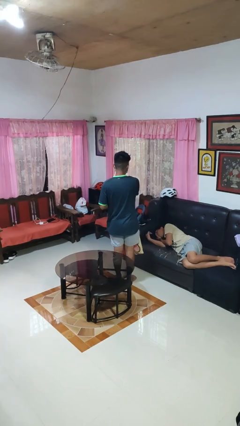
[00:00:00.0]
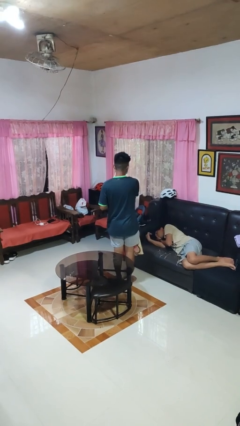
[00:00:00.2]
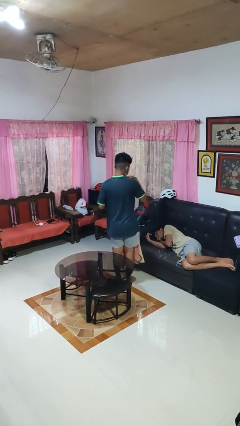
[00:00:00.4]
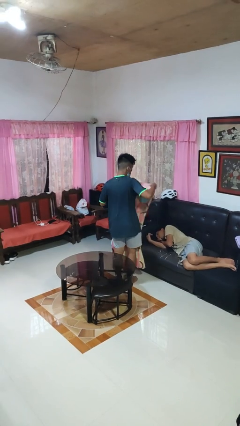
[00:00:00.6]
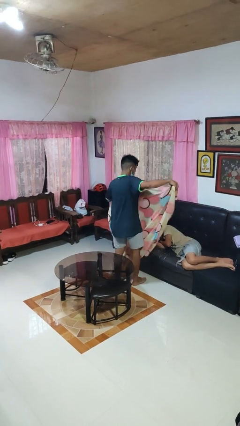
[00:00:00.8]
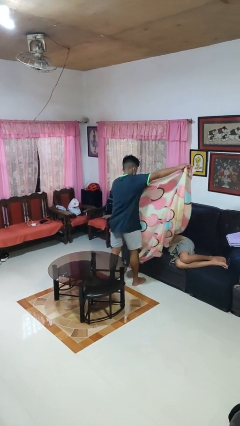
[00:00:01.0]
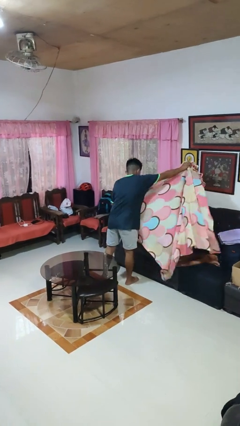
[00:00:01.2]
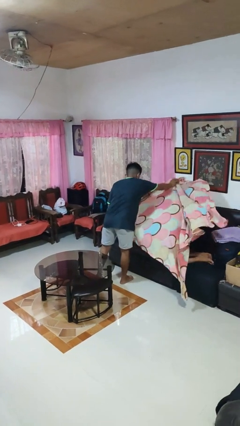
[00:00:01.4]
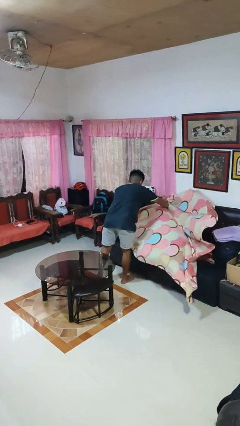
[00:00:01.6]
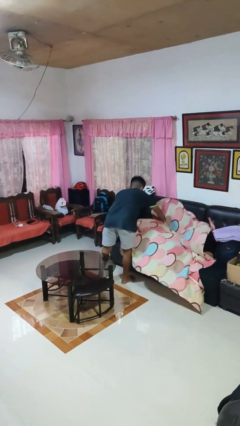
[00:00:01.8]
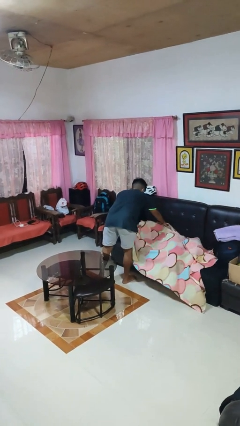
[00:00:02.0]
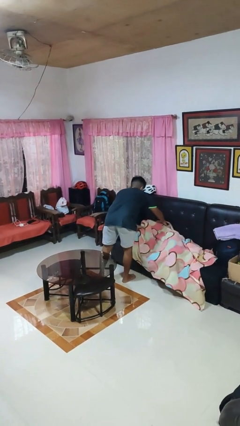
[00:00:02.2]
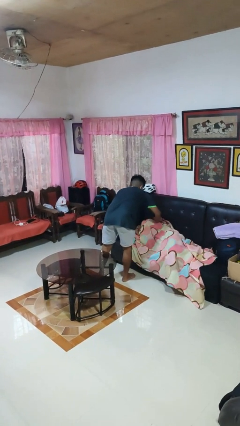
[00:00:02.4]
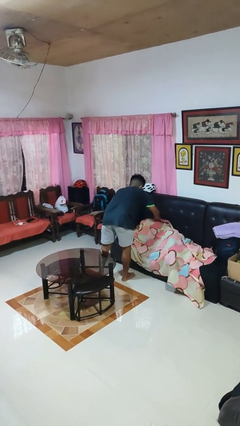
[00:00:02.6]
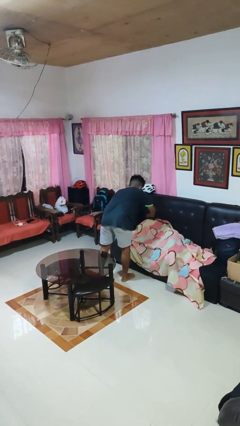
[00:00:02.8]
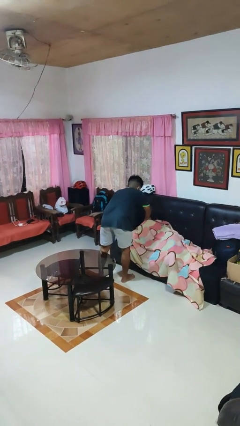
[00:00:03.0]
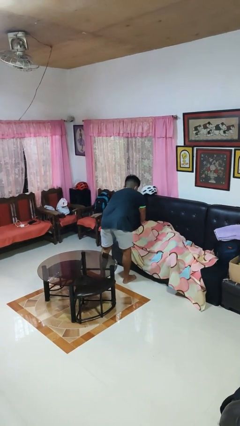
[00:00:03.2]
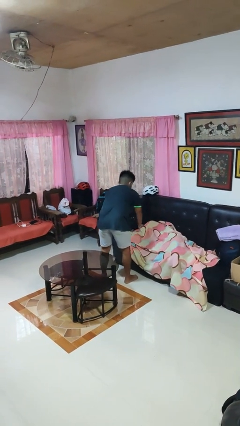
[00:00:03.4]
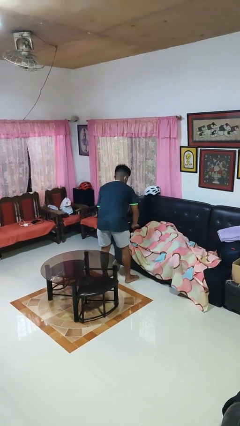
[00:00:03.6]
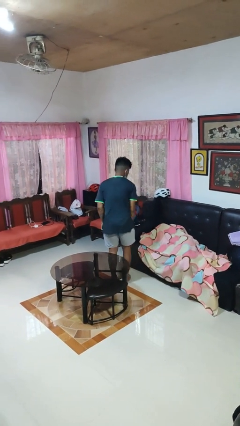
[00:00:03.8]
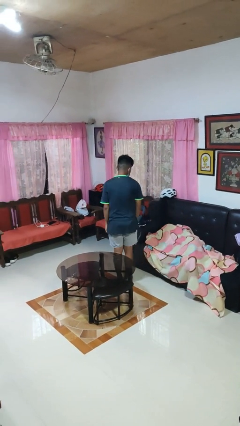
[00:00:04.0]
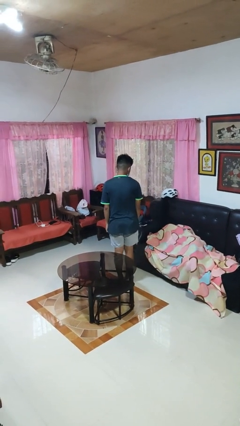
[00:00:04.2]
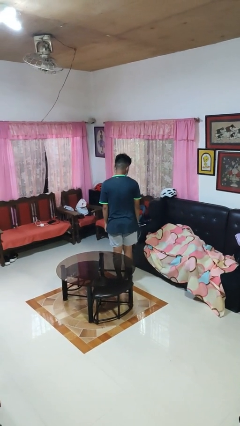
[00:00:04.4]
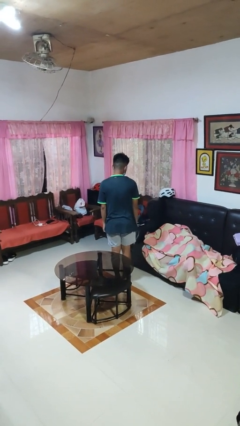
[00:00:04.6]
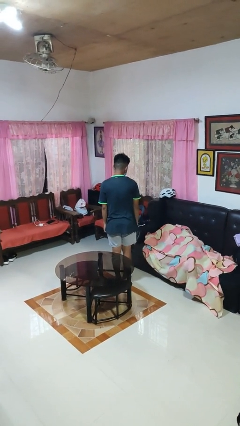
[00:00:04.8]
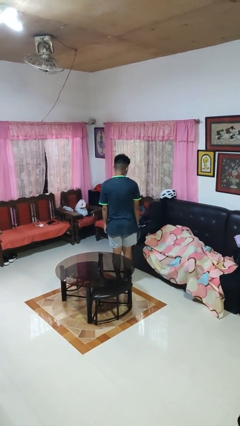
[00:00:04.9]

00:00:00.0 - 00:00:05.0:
person covers friend with blanket

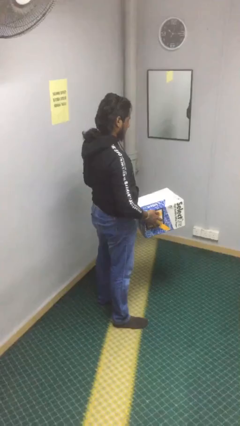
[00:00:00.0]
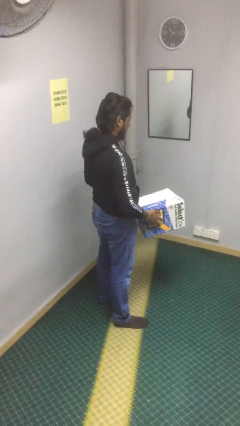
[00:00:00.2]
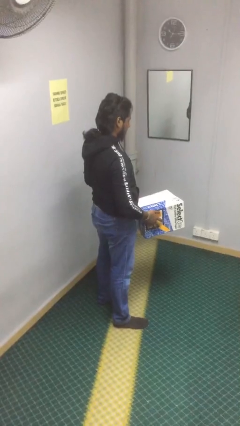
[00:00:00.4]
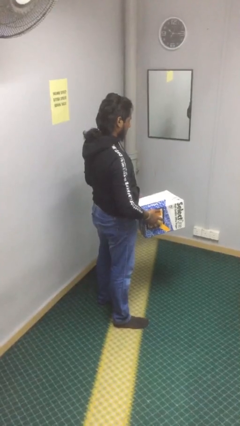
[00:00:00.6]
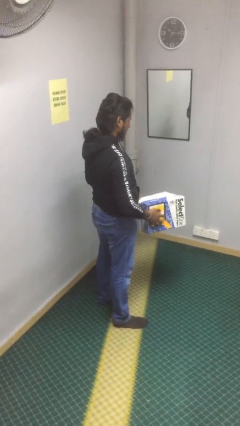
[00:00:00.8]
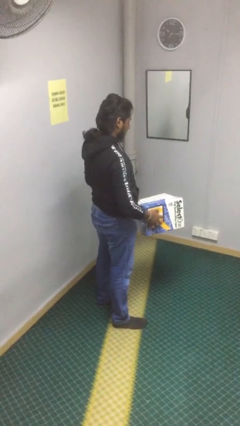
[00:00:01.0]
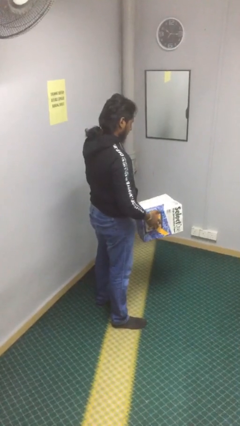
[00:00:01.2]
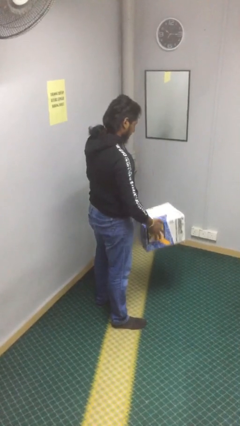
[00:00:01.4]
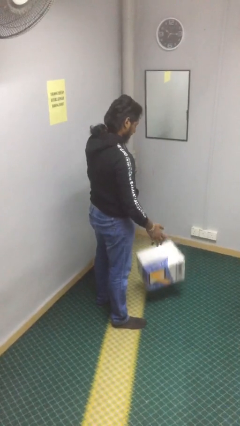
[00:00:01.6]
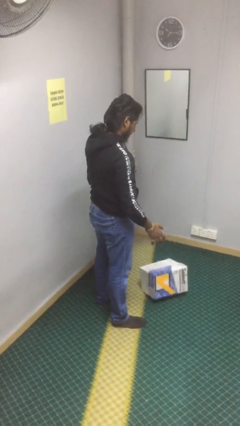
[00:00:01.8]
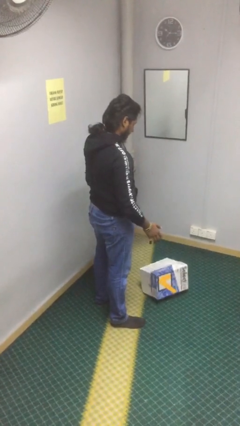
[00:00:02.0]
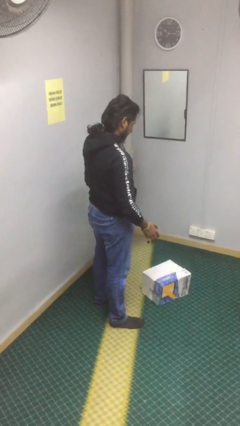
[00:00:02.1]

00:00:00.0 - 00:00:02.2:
person drops object

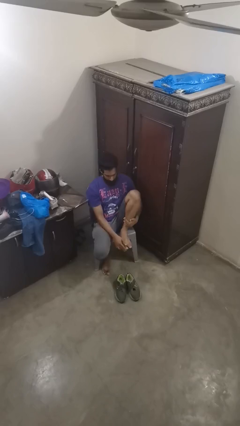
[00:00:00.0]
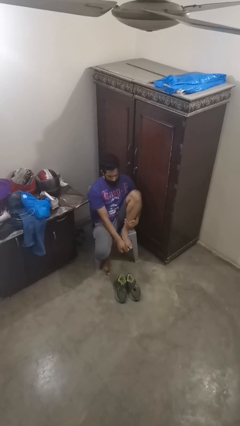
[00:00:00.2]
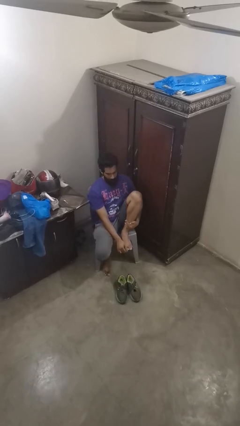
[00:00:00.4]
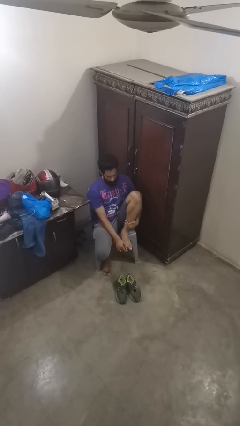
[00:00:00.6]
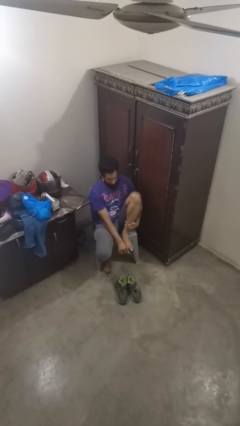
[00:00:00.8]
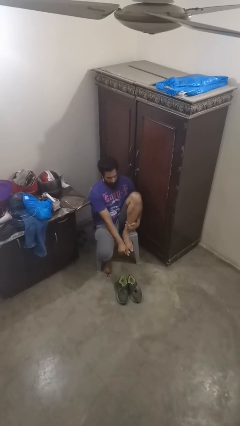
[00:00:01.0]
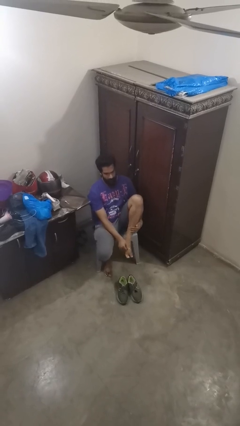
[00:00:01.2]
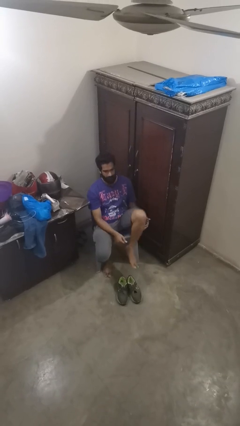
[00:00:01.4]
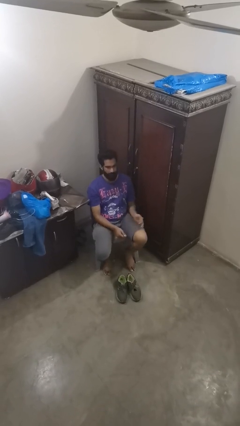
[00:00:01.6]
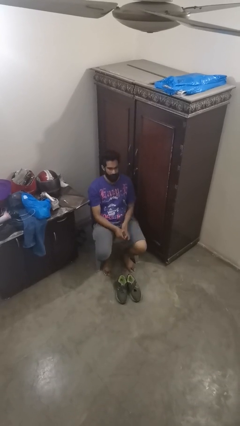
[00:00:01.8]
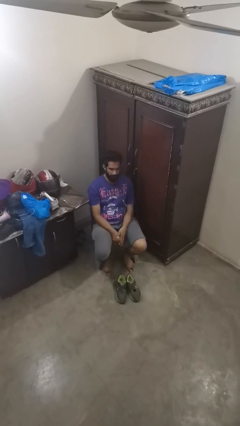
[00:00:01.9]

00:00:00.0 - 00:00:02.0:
person rubs foot

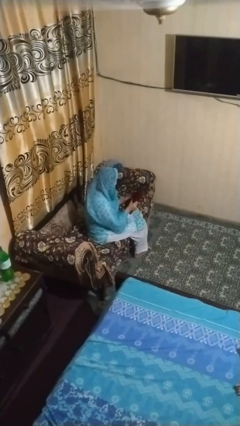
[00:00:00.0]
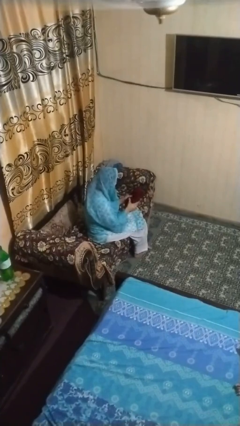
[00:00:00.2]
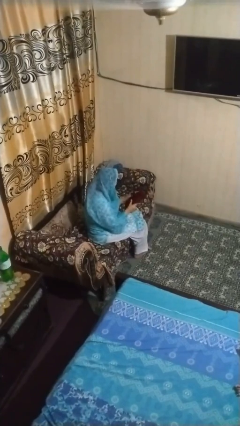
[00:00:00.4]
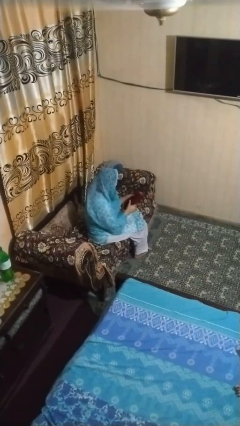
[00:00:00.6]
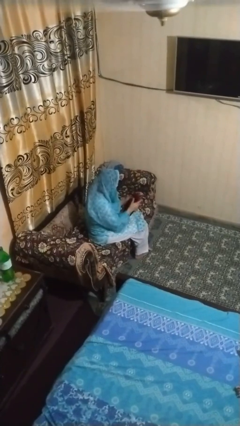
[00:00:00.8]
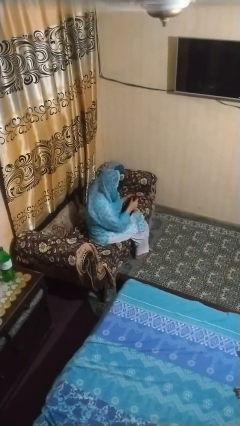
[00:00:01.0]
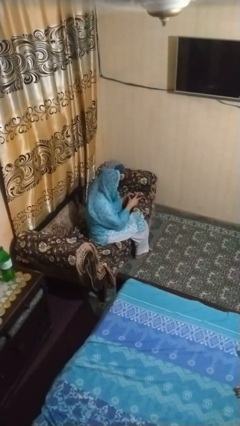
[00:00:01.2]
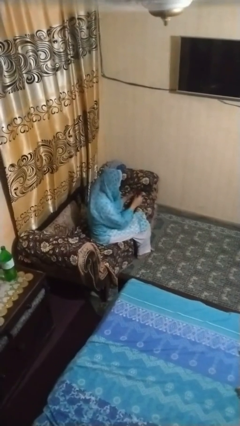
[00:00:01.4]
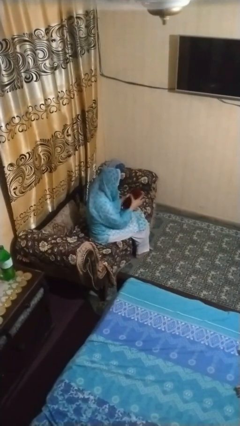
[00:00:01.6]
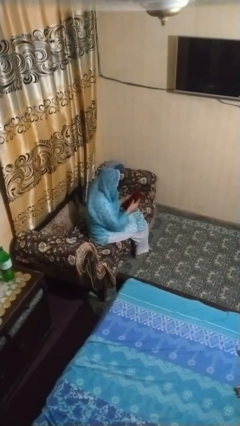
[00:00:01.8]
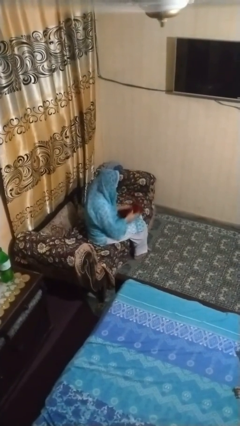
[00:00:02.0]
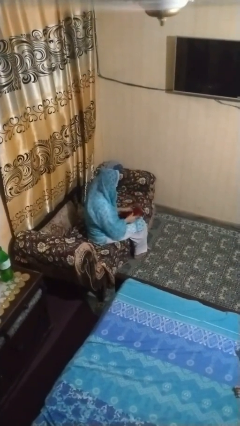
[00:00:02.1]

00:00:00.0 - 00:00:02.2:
person squeezes object

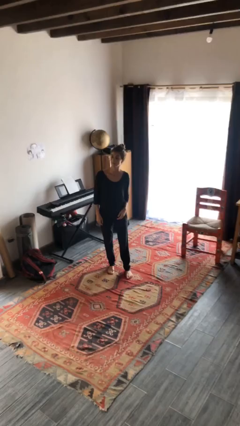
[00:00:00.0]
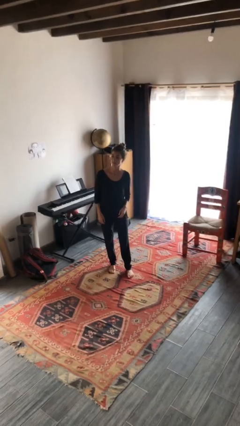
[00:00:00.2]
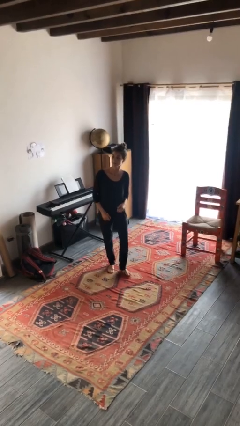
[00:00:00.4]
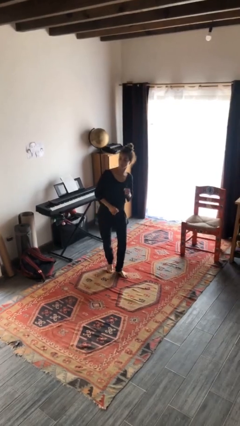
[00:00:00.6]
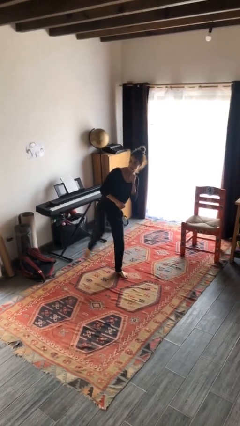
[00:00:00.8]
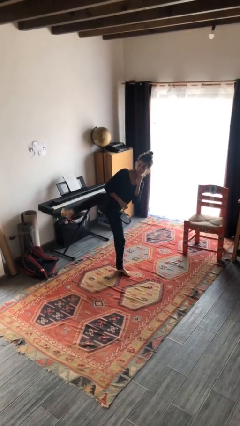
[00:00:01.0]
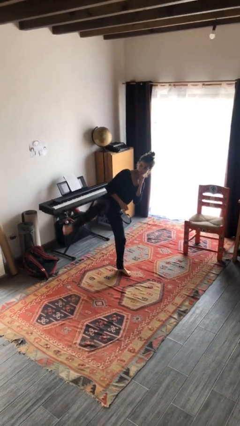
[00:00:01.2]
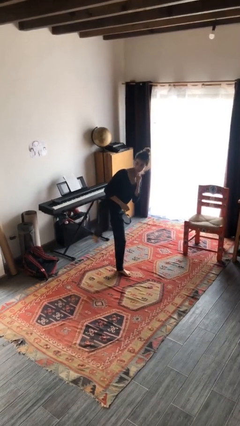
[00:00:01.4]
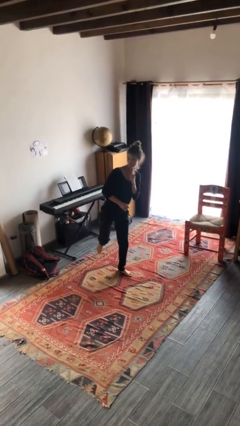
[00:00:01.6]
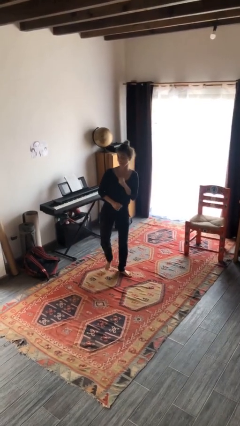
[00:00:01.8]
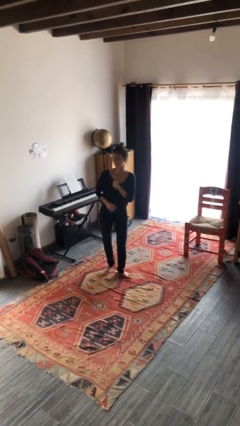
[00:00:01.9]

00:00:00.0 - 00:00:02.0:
person karate kicks

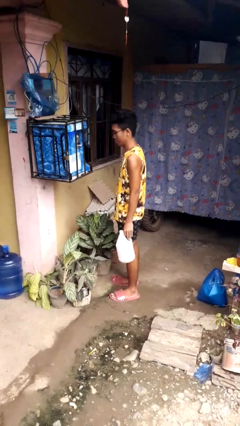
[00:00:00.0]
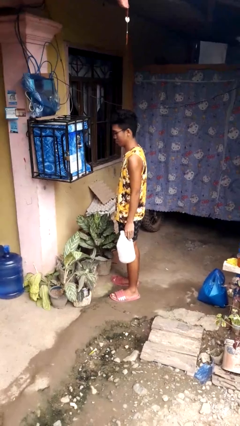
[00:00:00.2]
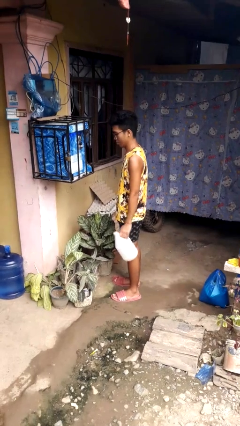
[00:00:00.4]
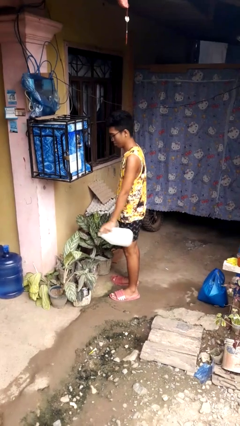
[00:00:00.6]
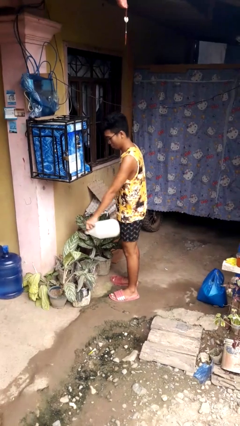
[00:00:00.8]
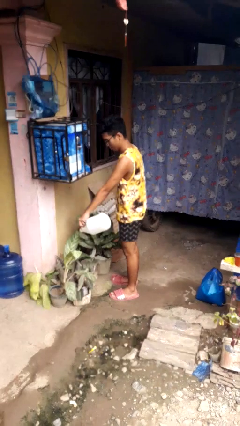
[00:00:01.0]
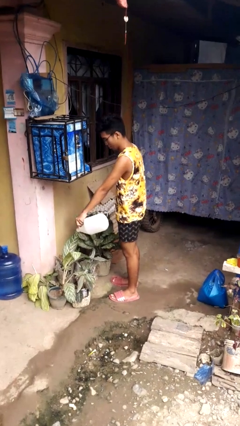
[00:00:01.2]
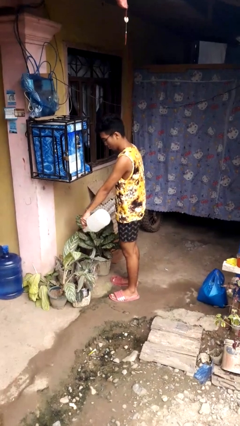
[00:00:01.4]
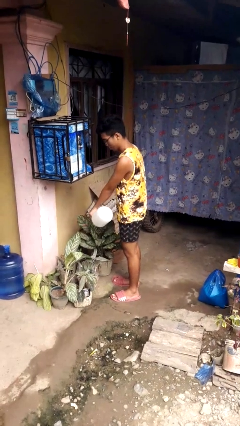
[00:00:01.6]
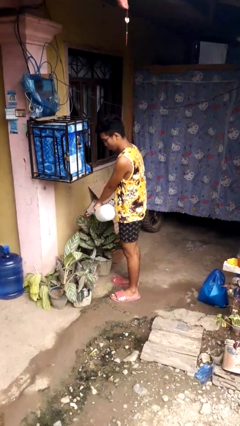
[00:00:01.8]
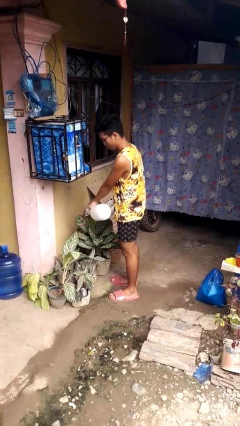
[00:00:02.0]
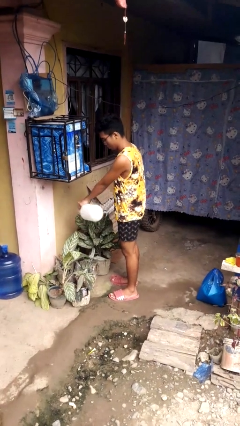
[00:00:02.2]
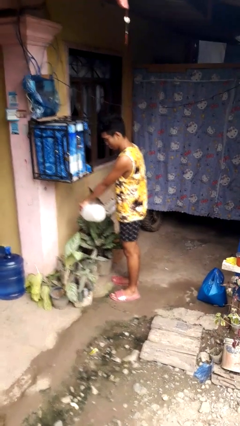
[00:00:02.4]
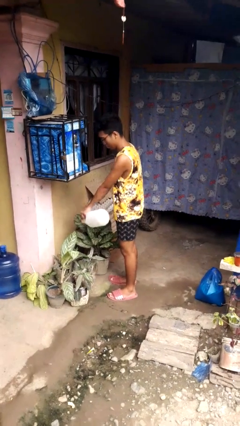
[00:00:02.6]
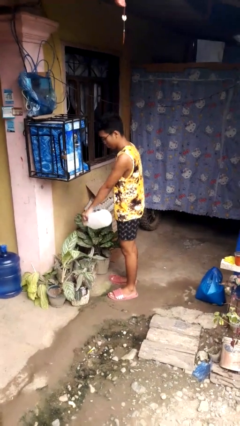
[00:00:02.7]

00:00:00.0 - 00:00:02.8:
person waters houseplant

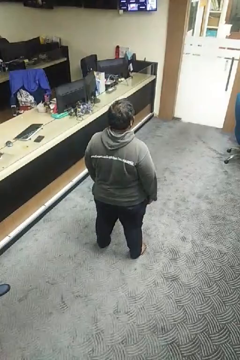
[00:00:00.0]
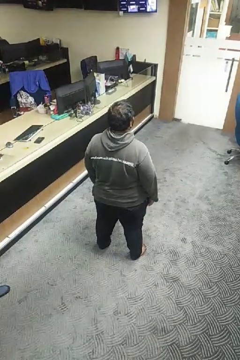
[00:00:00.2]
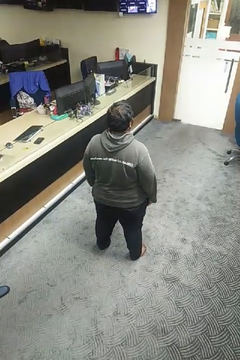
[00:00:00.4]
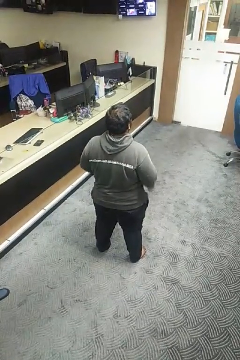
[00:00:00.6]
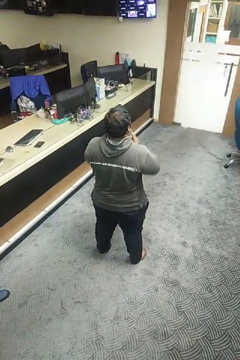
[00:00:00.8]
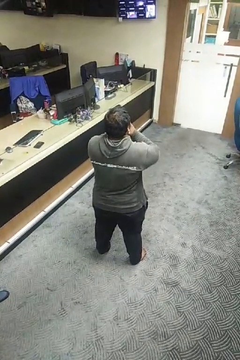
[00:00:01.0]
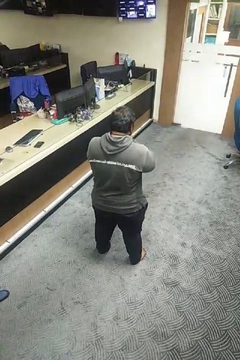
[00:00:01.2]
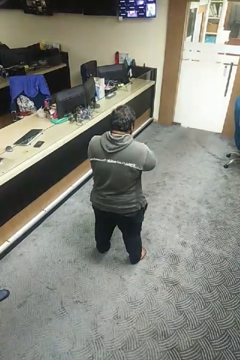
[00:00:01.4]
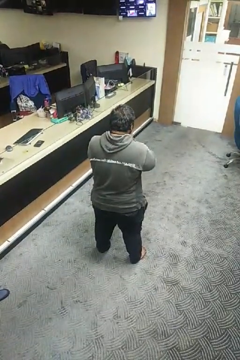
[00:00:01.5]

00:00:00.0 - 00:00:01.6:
person sneezes into hand
